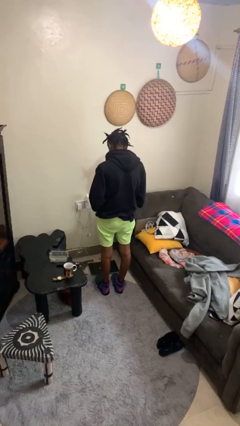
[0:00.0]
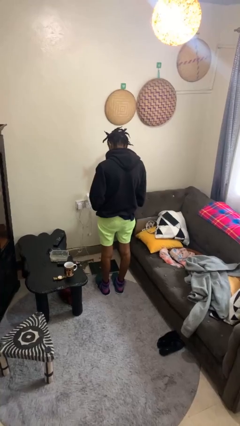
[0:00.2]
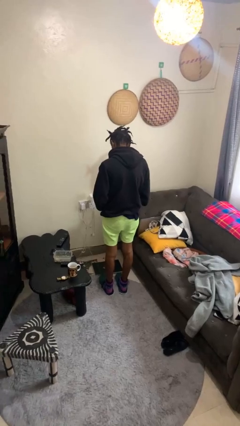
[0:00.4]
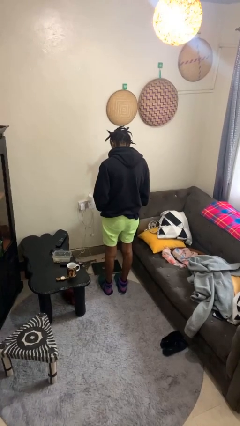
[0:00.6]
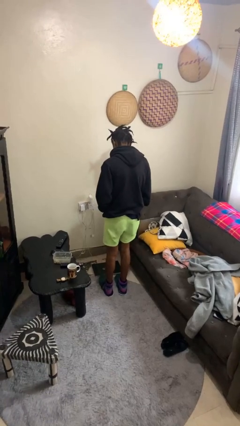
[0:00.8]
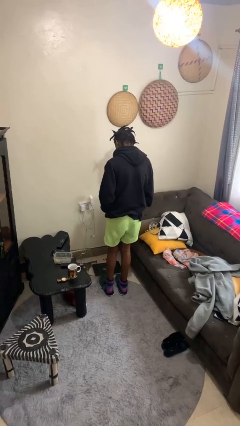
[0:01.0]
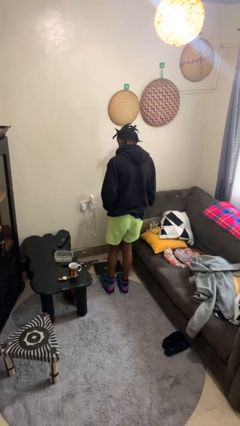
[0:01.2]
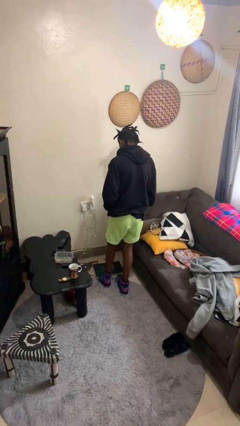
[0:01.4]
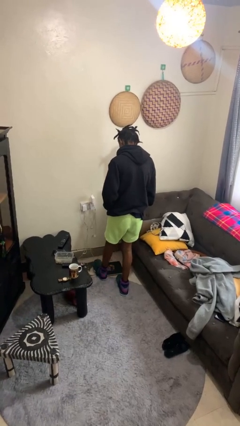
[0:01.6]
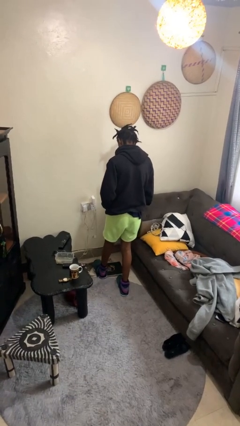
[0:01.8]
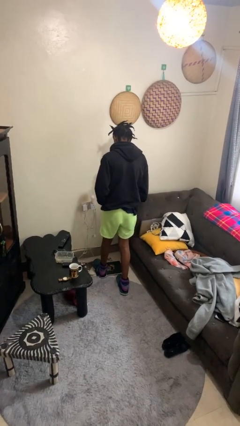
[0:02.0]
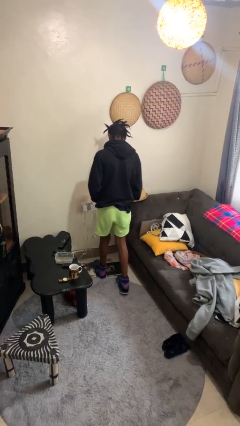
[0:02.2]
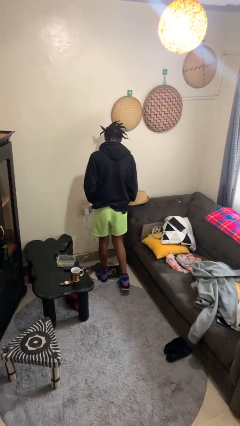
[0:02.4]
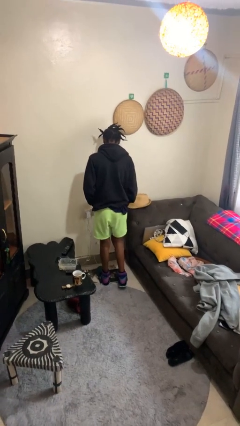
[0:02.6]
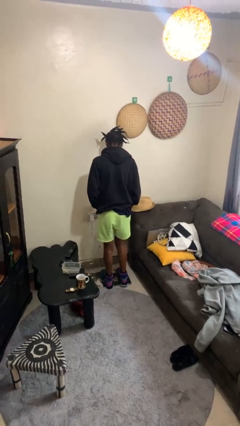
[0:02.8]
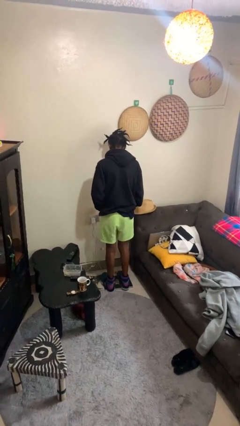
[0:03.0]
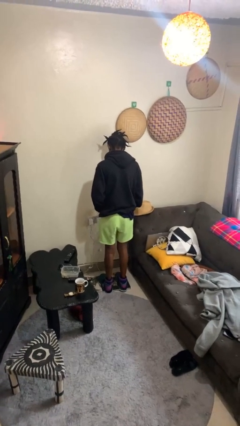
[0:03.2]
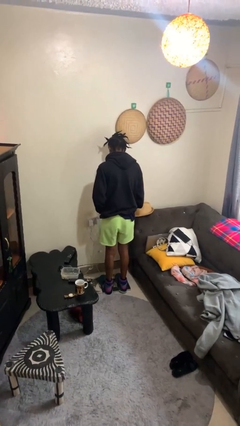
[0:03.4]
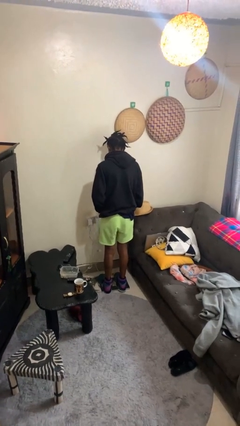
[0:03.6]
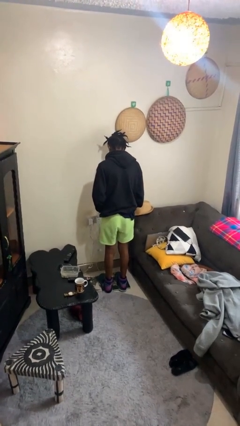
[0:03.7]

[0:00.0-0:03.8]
person uses bodyweight scale

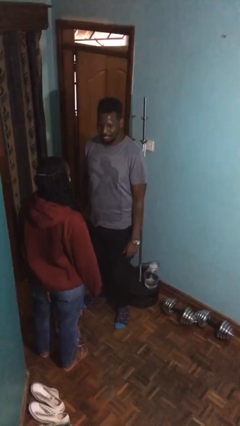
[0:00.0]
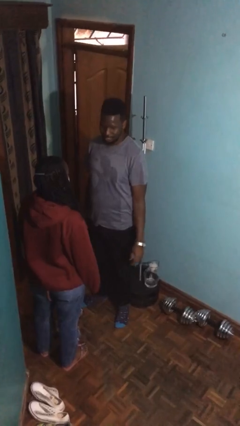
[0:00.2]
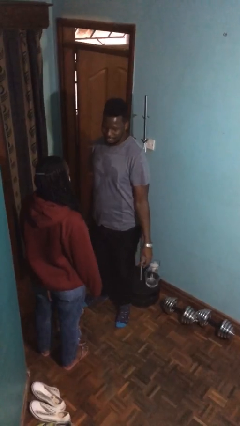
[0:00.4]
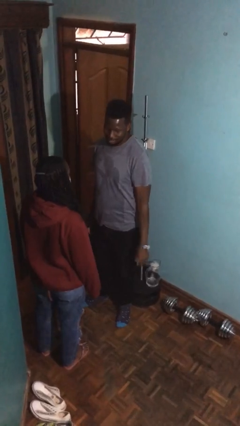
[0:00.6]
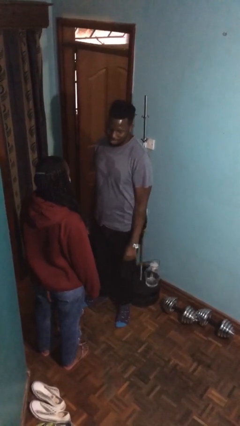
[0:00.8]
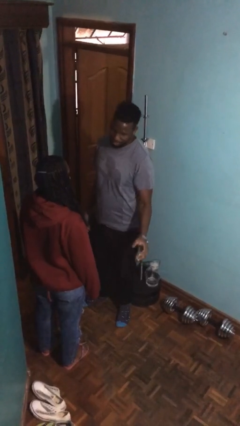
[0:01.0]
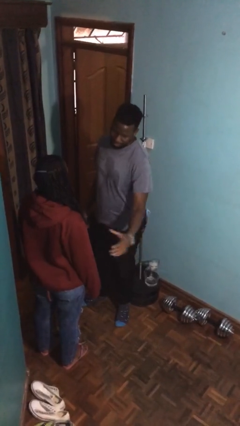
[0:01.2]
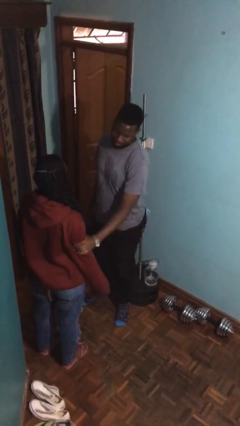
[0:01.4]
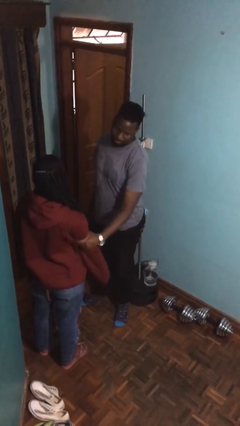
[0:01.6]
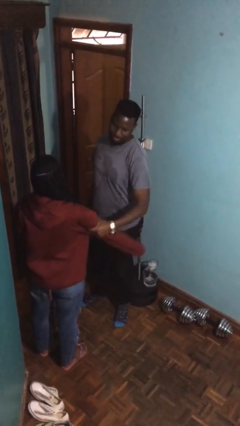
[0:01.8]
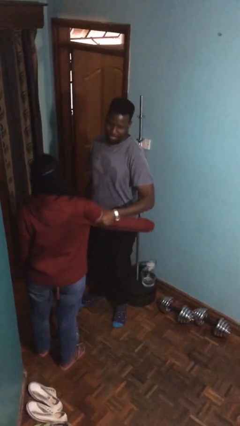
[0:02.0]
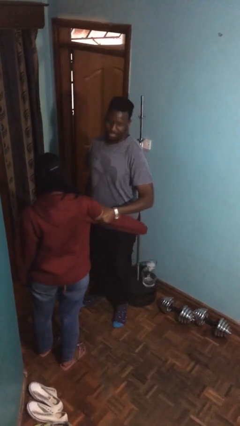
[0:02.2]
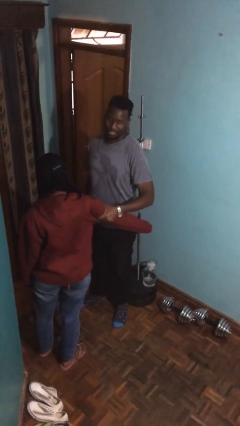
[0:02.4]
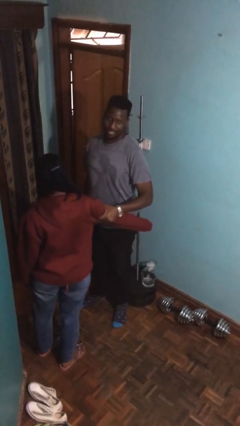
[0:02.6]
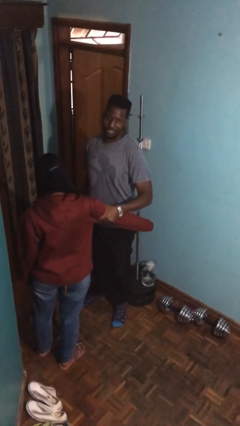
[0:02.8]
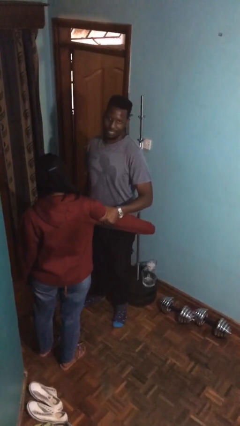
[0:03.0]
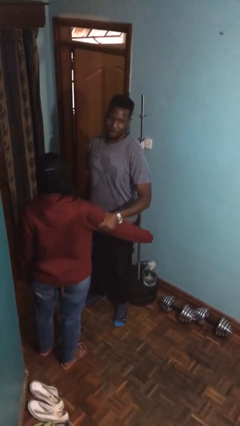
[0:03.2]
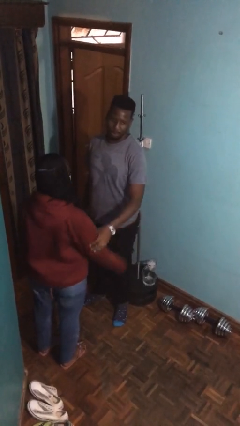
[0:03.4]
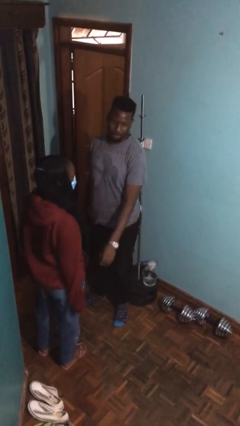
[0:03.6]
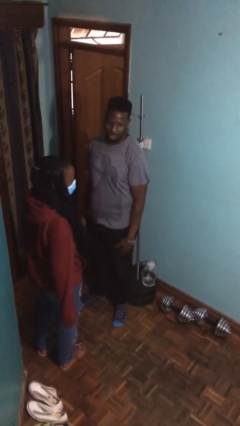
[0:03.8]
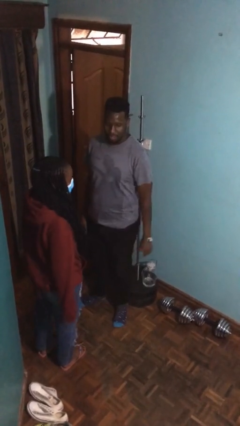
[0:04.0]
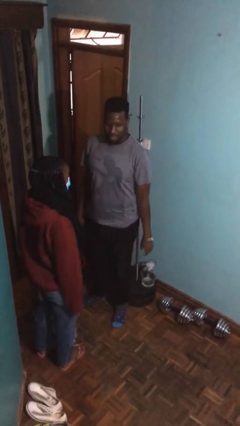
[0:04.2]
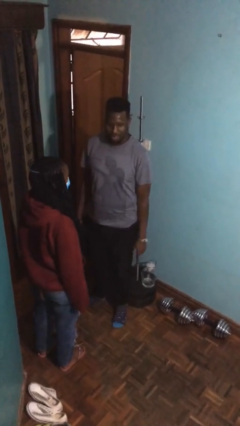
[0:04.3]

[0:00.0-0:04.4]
person grabs person by bicep

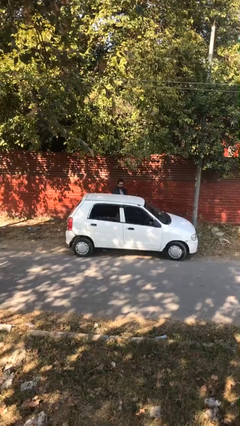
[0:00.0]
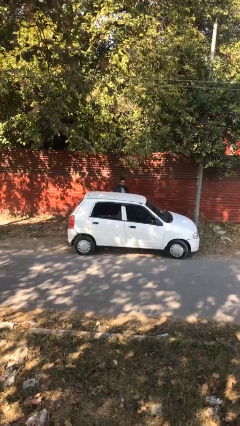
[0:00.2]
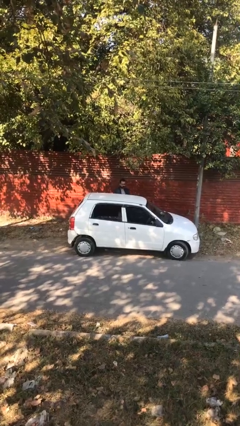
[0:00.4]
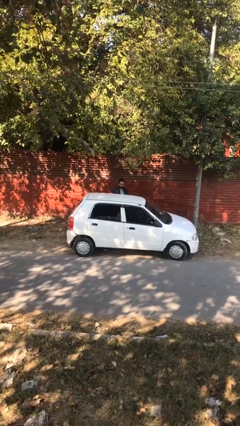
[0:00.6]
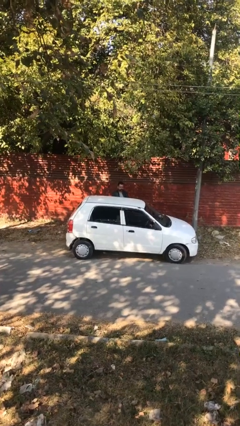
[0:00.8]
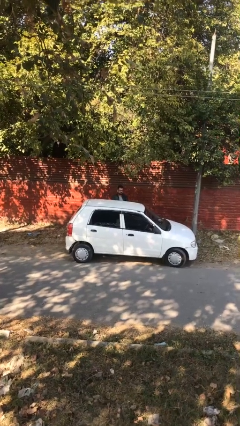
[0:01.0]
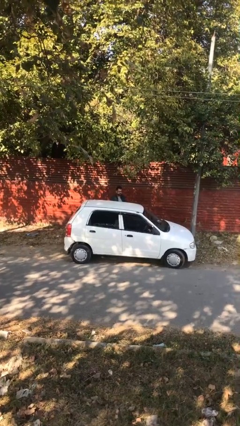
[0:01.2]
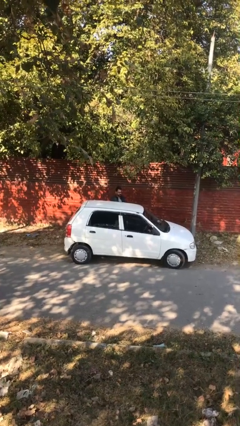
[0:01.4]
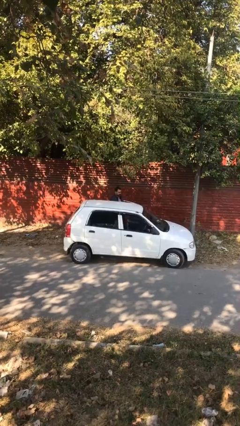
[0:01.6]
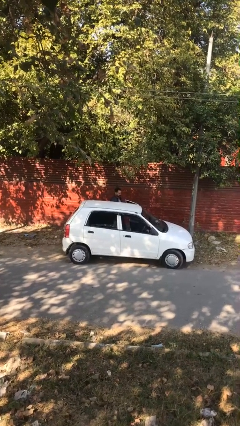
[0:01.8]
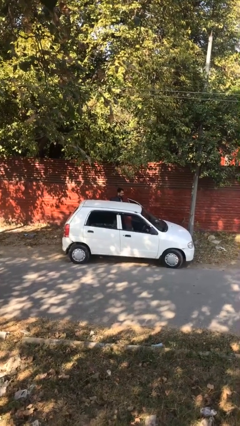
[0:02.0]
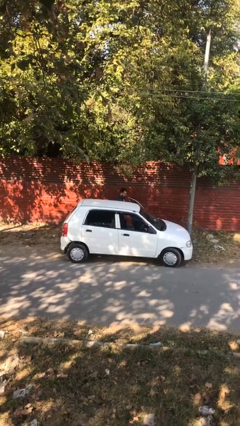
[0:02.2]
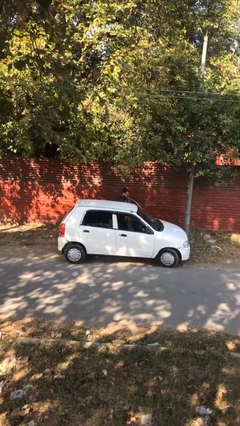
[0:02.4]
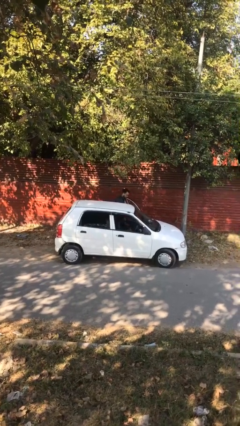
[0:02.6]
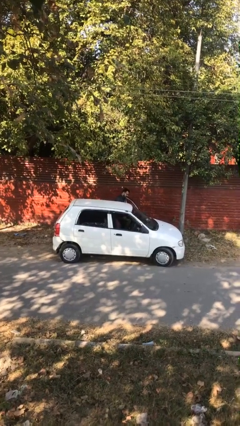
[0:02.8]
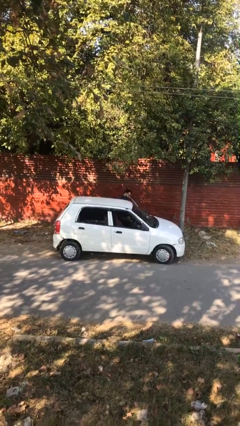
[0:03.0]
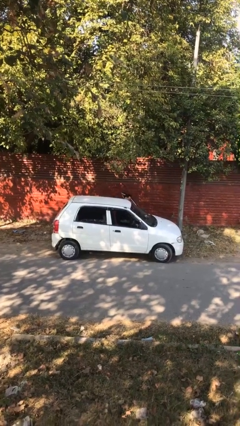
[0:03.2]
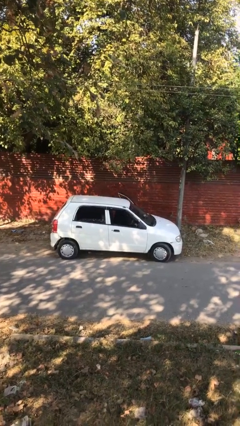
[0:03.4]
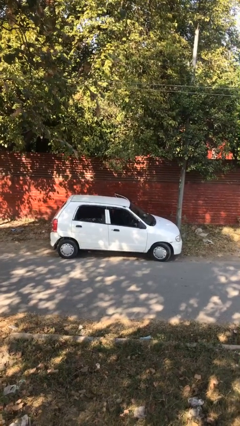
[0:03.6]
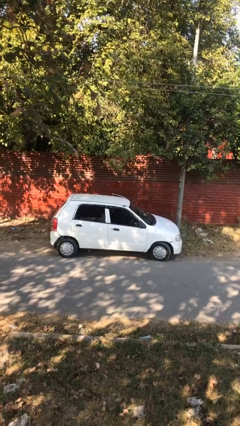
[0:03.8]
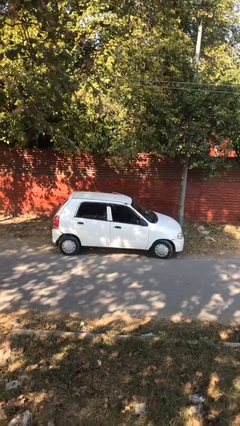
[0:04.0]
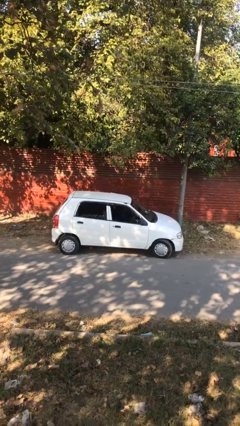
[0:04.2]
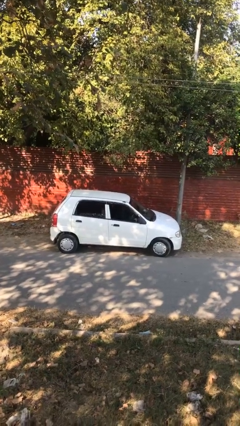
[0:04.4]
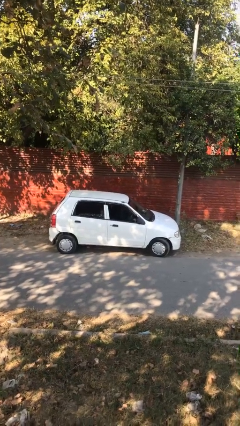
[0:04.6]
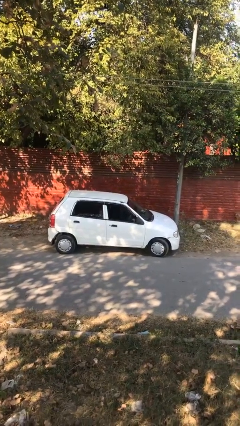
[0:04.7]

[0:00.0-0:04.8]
person enters car

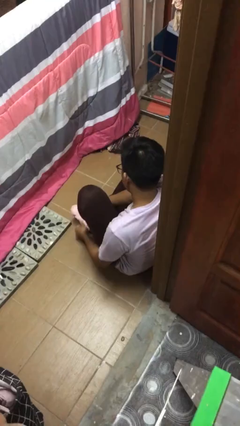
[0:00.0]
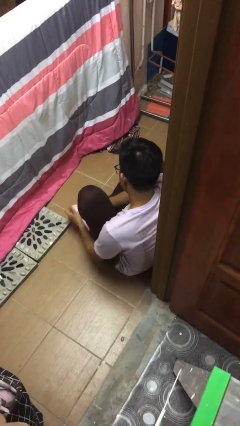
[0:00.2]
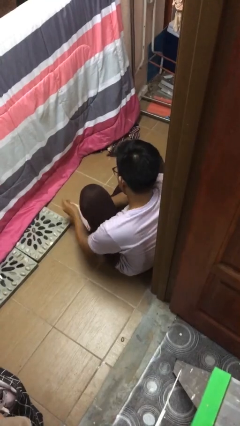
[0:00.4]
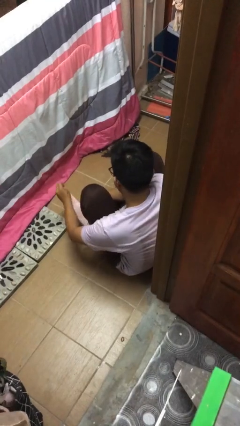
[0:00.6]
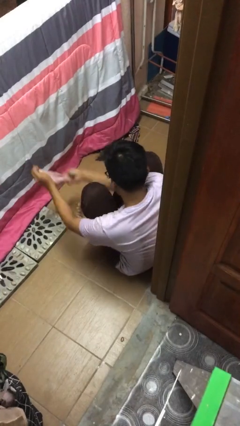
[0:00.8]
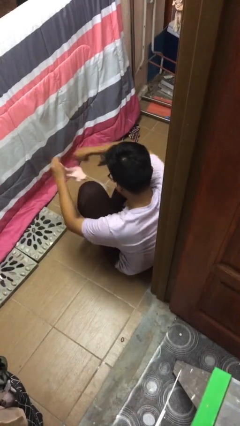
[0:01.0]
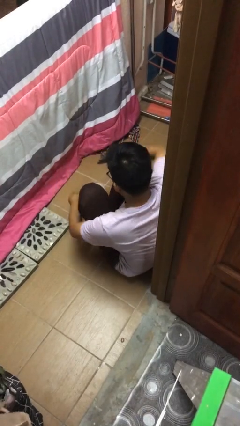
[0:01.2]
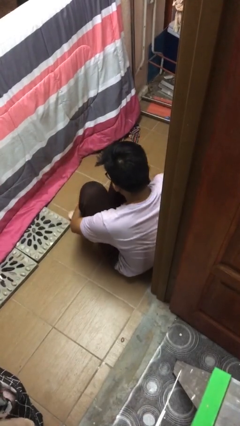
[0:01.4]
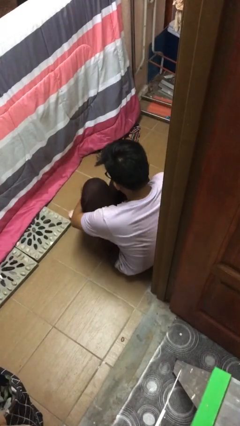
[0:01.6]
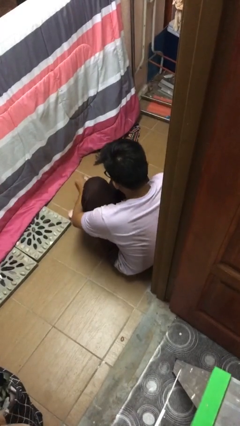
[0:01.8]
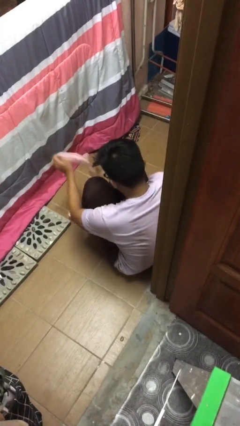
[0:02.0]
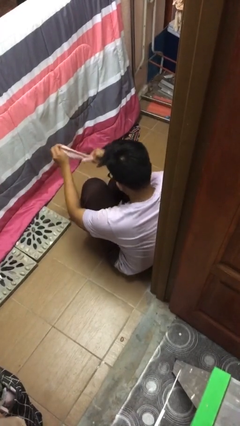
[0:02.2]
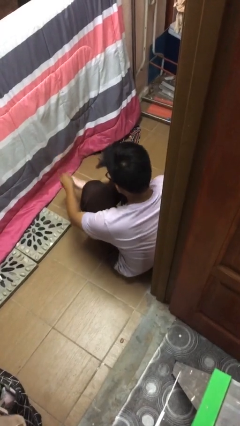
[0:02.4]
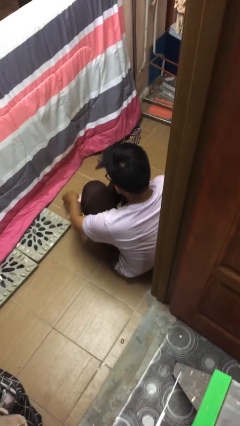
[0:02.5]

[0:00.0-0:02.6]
person takes off socks

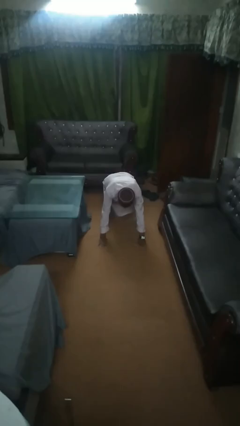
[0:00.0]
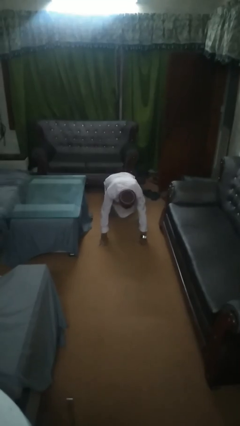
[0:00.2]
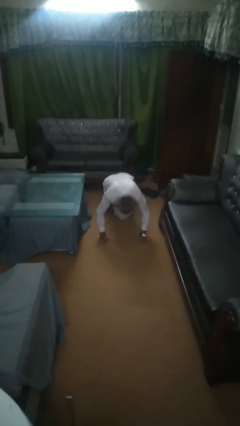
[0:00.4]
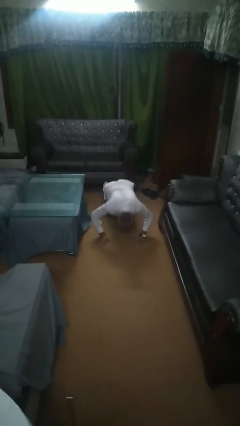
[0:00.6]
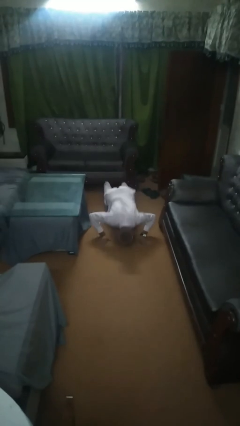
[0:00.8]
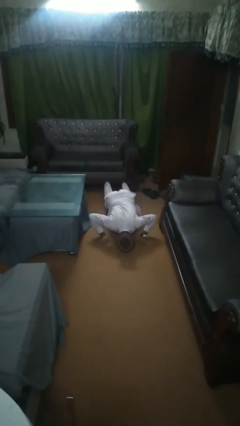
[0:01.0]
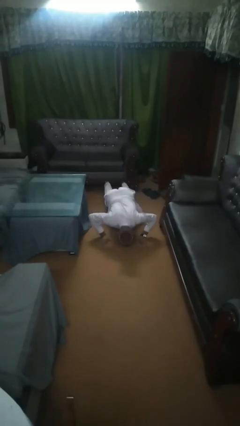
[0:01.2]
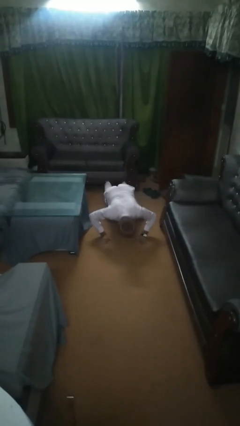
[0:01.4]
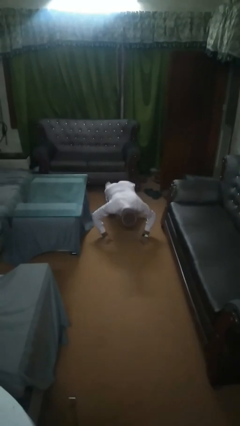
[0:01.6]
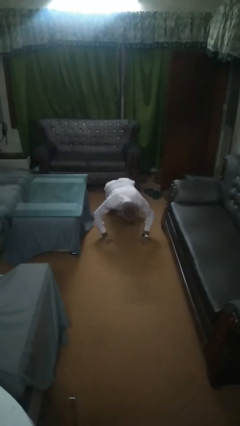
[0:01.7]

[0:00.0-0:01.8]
person exercises with pushup

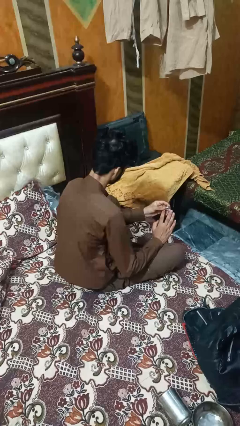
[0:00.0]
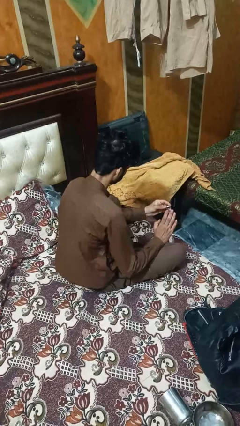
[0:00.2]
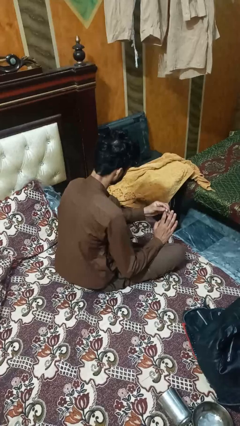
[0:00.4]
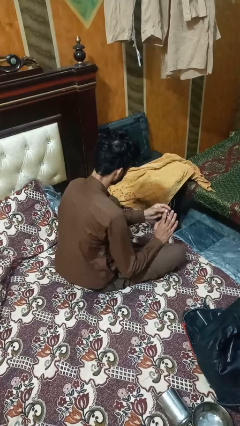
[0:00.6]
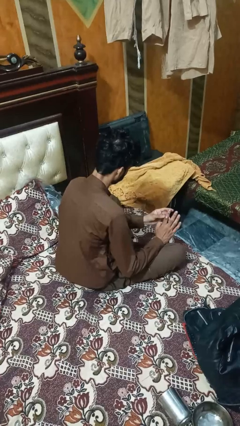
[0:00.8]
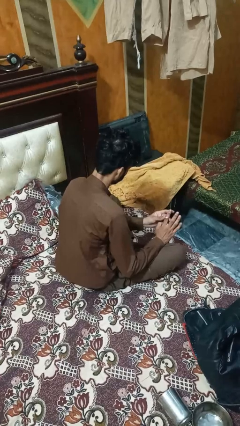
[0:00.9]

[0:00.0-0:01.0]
person puts on ring
